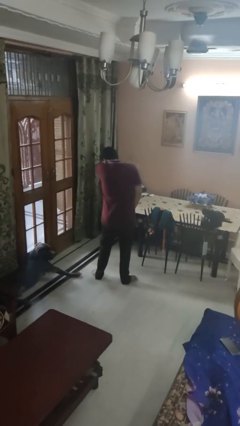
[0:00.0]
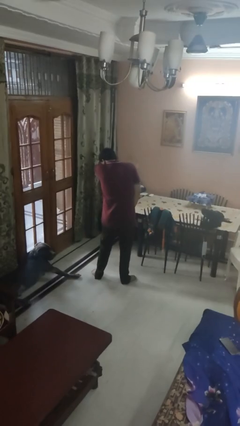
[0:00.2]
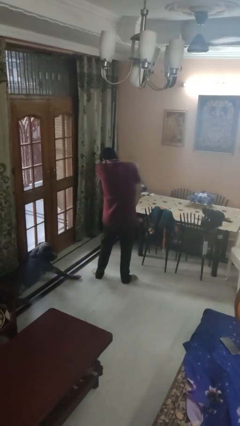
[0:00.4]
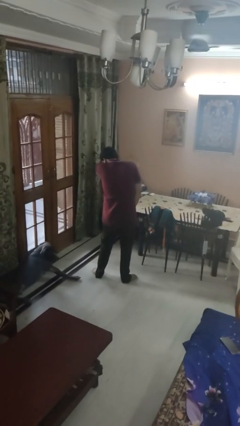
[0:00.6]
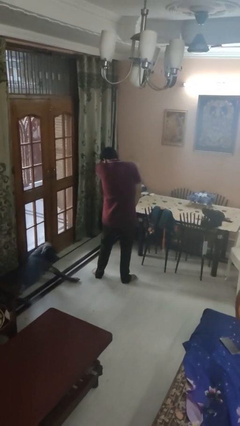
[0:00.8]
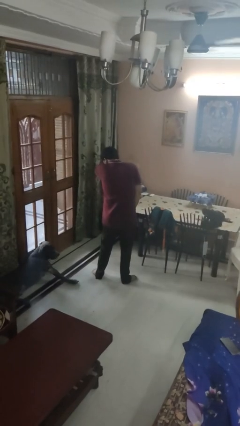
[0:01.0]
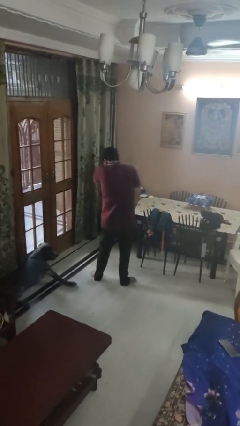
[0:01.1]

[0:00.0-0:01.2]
person sneezes into arm

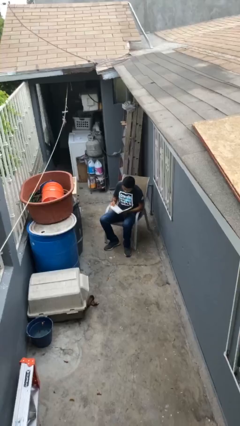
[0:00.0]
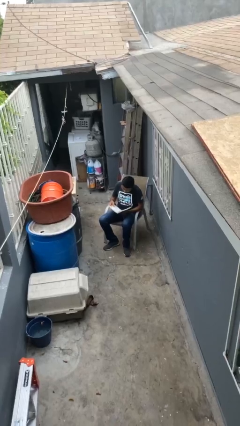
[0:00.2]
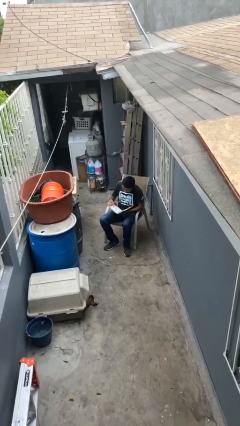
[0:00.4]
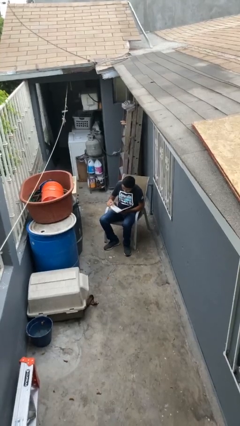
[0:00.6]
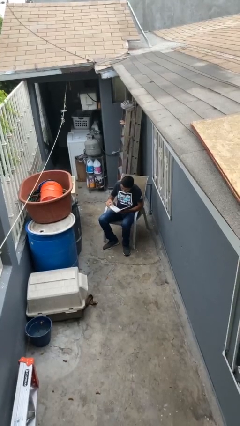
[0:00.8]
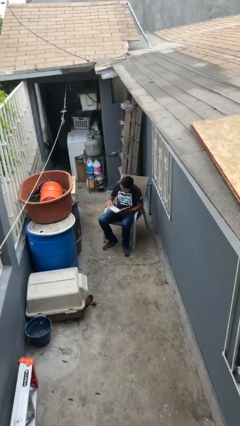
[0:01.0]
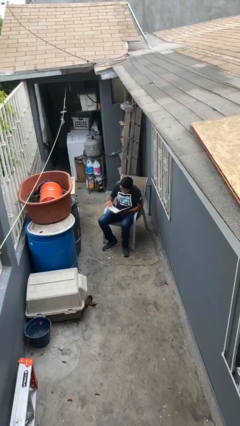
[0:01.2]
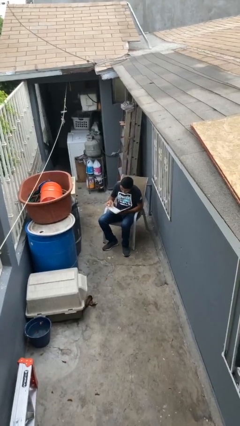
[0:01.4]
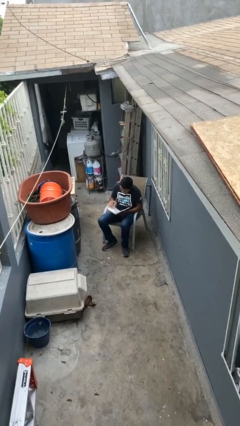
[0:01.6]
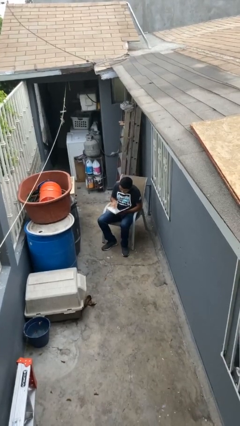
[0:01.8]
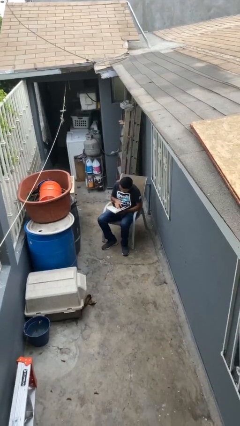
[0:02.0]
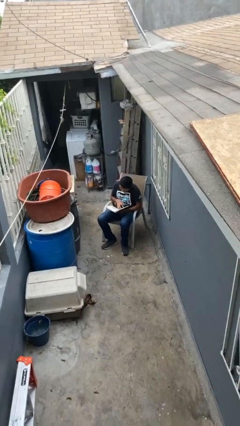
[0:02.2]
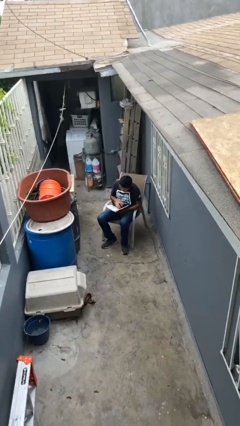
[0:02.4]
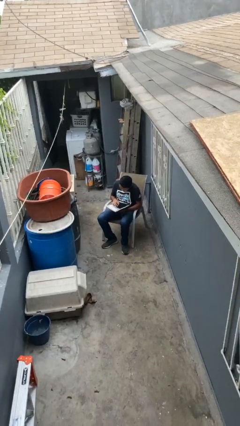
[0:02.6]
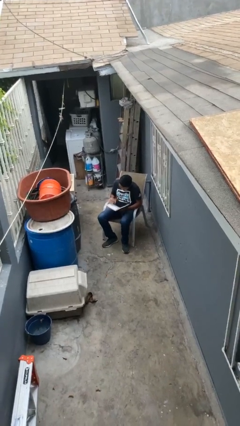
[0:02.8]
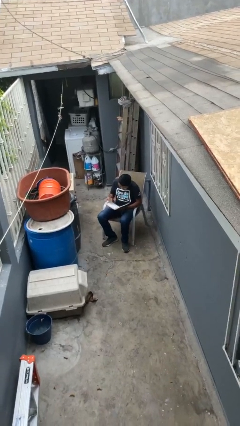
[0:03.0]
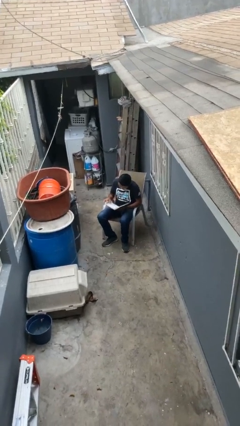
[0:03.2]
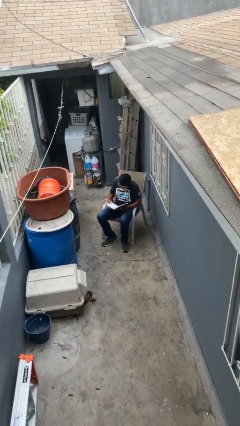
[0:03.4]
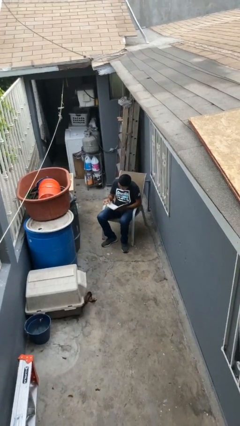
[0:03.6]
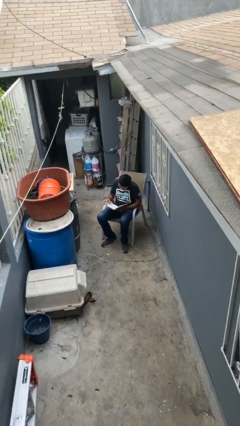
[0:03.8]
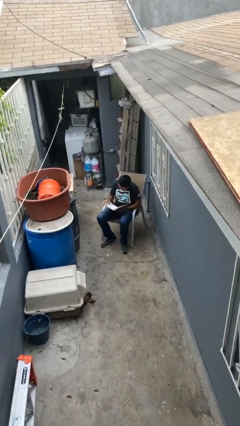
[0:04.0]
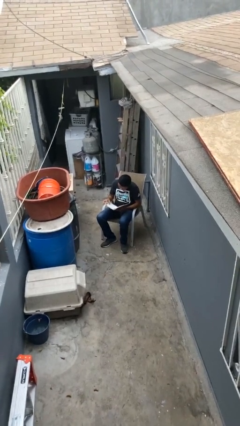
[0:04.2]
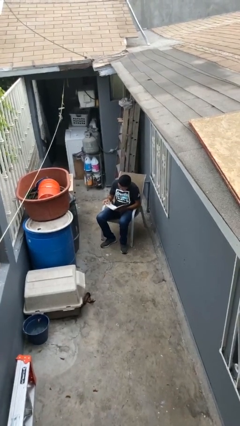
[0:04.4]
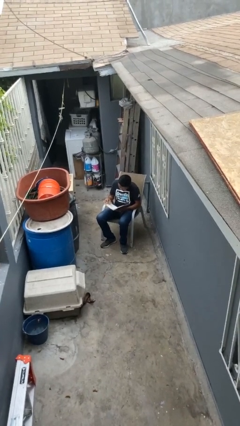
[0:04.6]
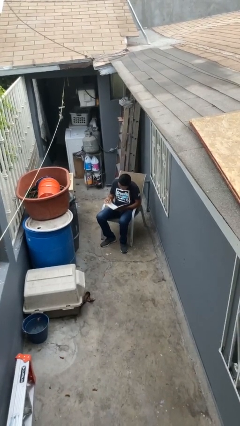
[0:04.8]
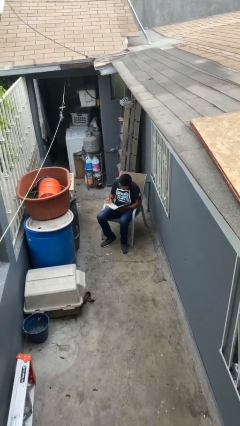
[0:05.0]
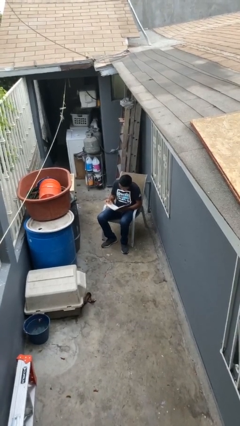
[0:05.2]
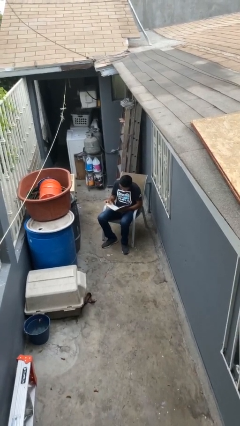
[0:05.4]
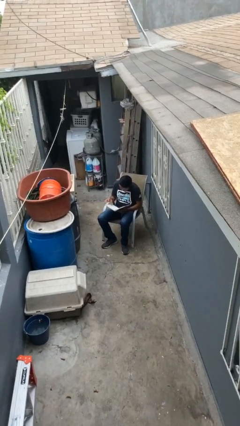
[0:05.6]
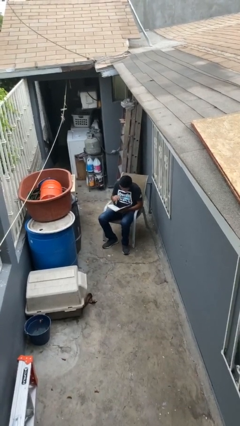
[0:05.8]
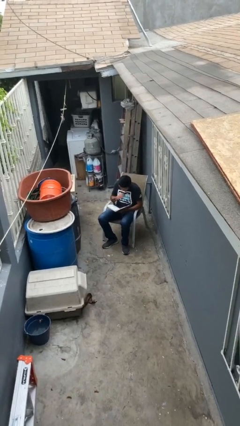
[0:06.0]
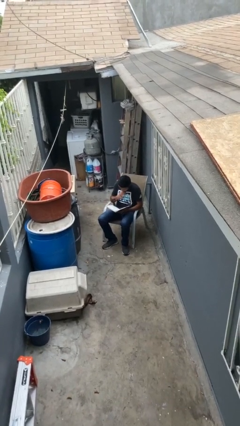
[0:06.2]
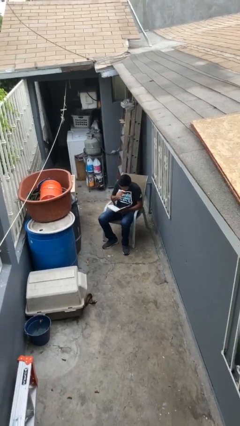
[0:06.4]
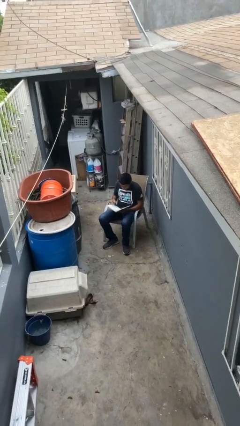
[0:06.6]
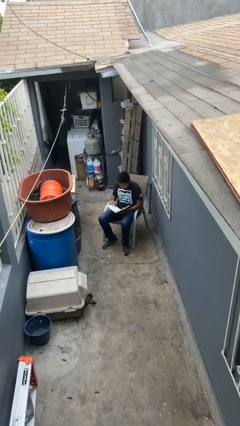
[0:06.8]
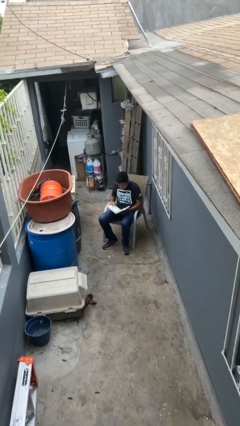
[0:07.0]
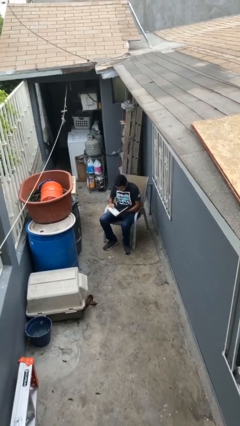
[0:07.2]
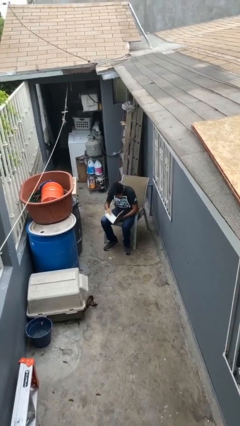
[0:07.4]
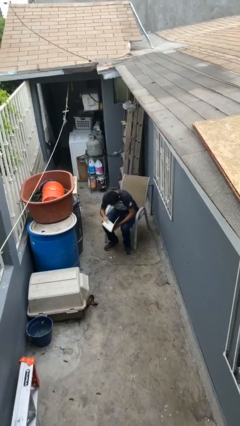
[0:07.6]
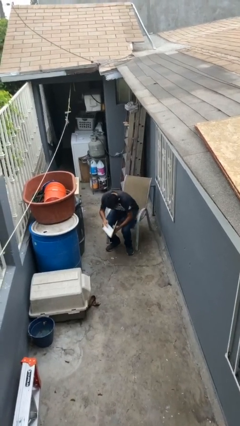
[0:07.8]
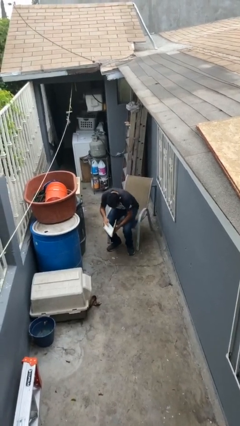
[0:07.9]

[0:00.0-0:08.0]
person reads document

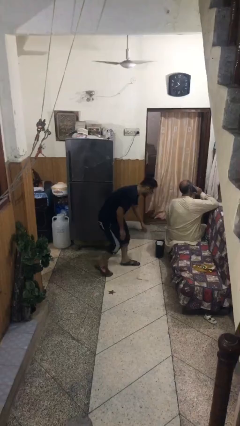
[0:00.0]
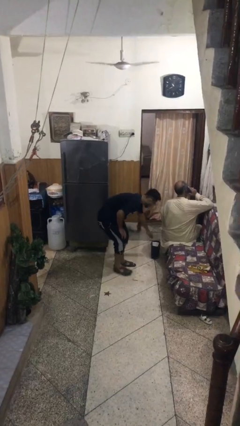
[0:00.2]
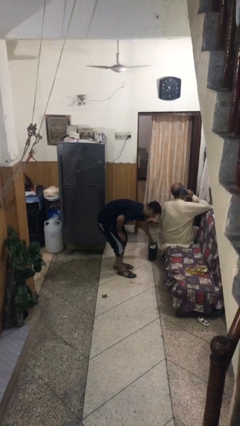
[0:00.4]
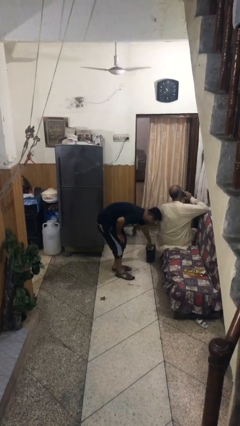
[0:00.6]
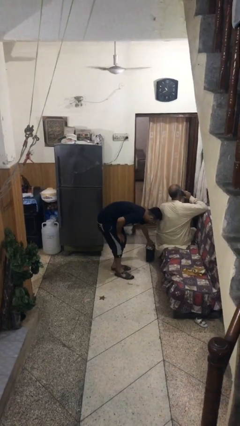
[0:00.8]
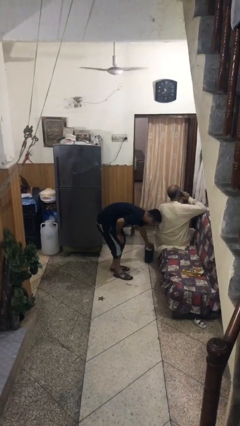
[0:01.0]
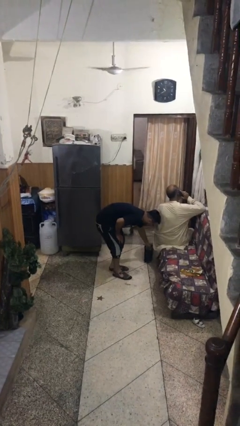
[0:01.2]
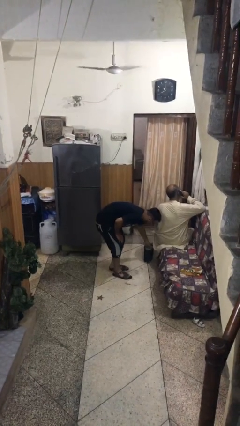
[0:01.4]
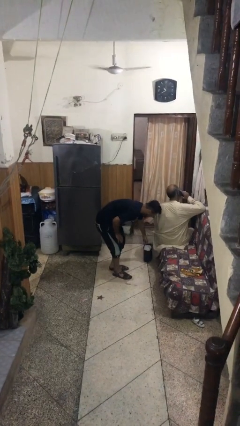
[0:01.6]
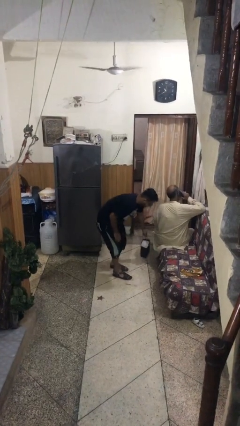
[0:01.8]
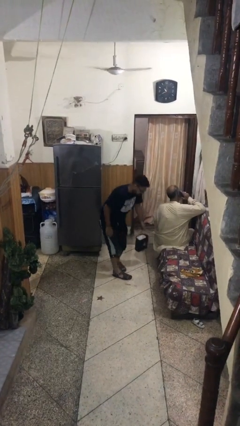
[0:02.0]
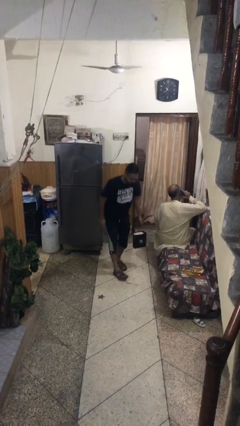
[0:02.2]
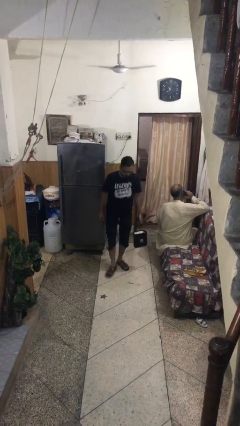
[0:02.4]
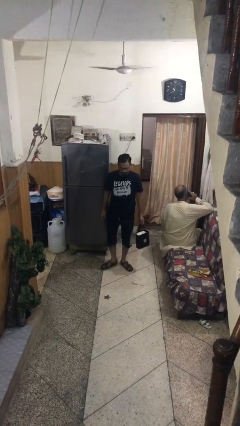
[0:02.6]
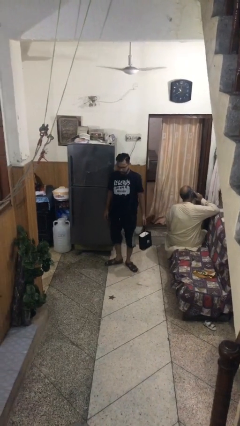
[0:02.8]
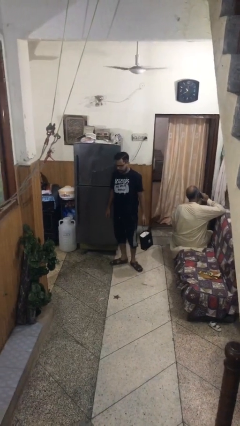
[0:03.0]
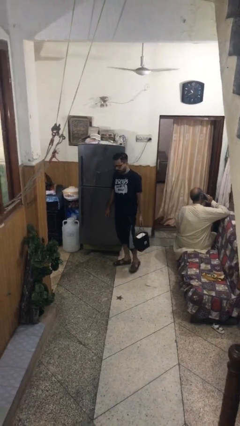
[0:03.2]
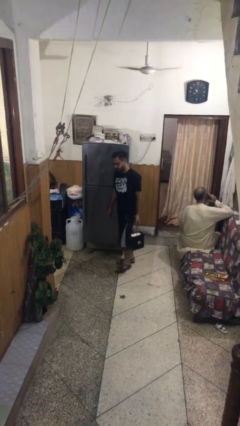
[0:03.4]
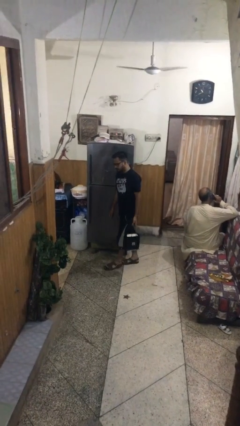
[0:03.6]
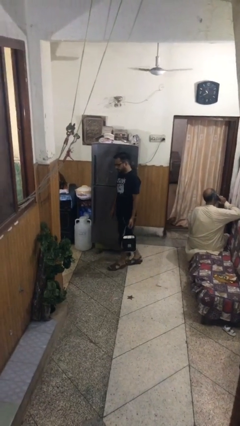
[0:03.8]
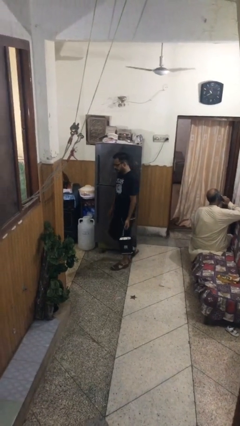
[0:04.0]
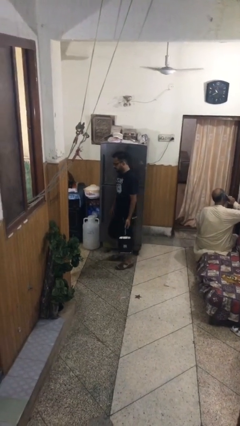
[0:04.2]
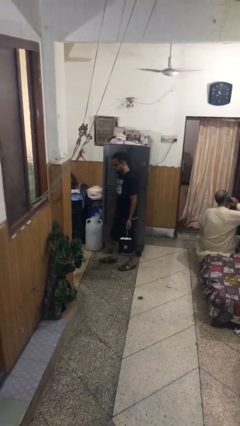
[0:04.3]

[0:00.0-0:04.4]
person steals object from person

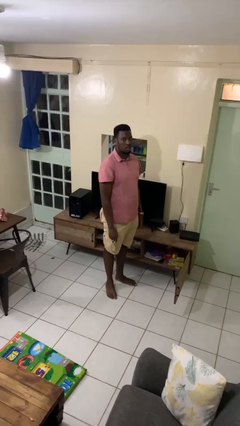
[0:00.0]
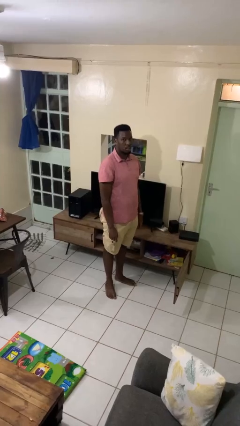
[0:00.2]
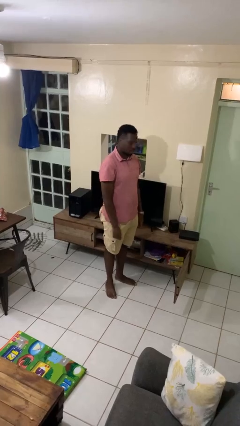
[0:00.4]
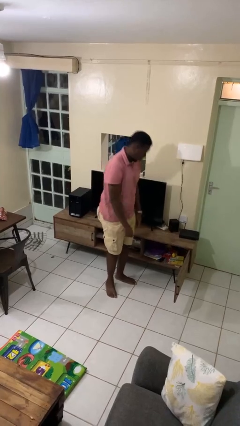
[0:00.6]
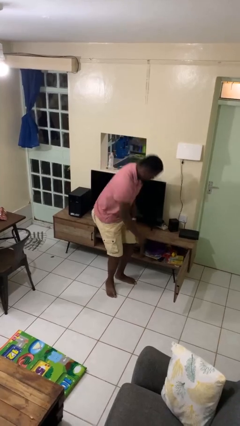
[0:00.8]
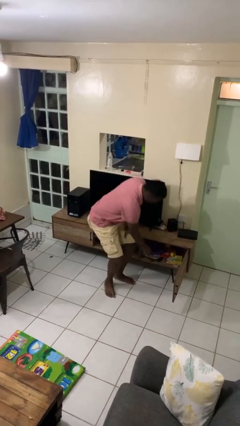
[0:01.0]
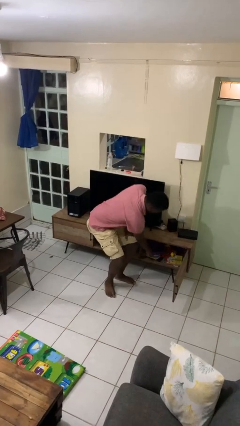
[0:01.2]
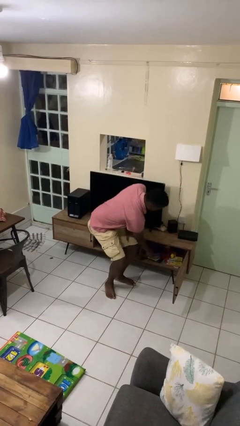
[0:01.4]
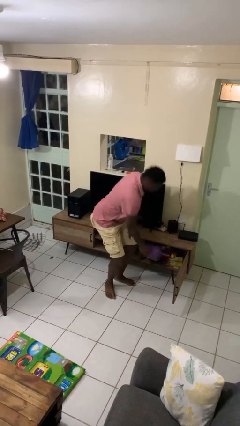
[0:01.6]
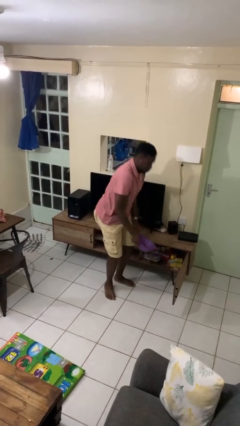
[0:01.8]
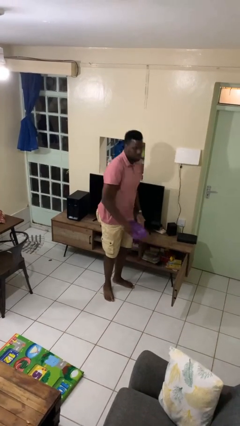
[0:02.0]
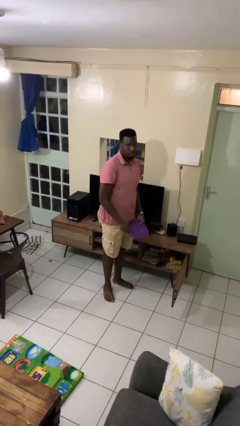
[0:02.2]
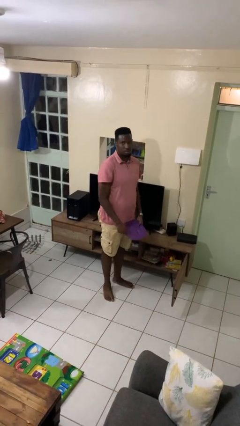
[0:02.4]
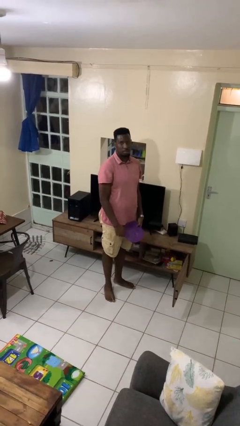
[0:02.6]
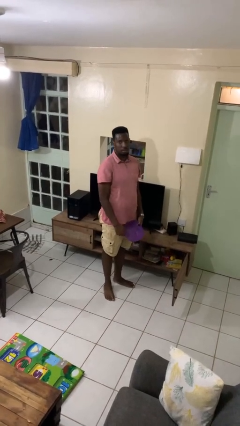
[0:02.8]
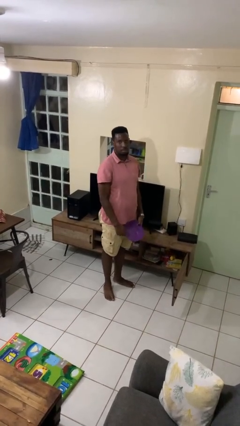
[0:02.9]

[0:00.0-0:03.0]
person picks up object from cabinet

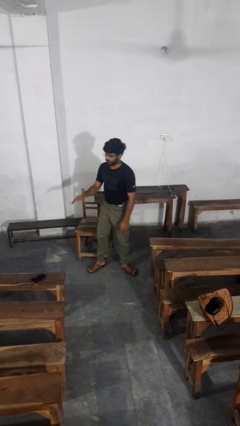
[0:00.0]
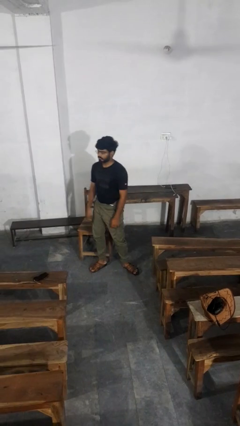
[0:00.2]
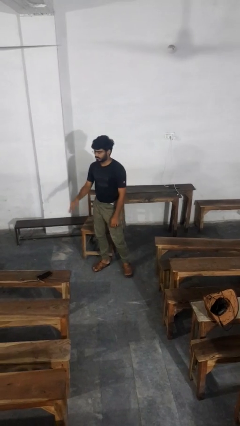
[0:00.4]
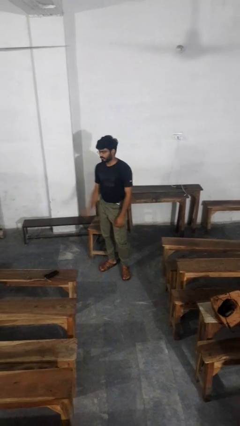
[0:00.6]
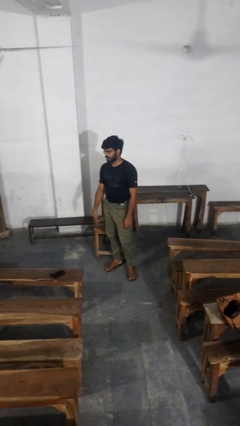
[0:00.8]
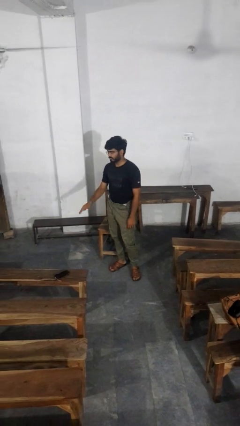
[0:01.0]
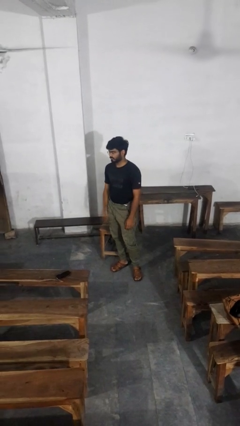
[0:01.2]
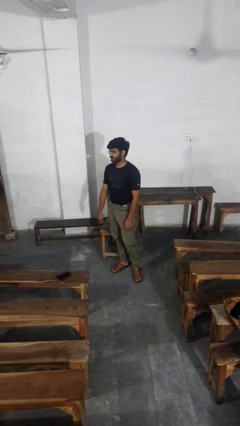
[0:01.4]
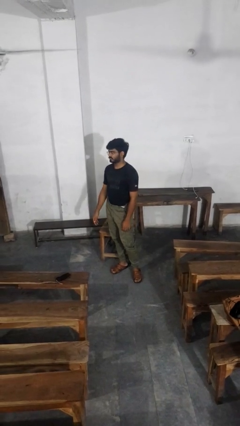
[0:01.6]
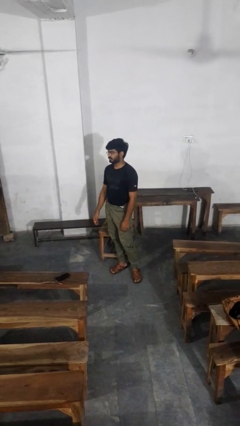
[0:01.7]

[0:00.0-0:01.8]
person slaps hands on thighs
